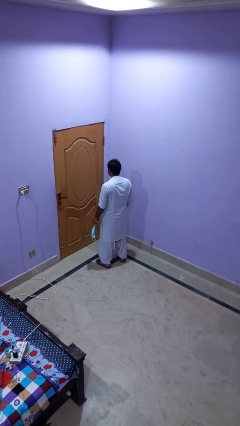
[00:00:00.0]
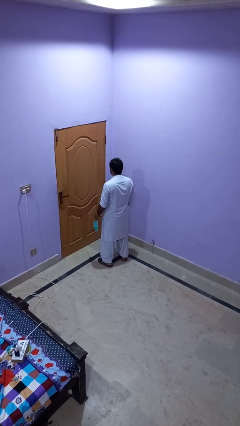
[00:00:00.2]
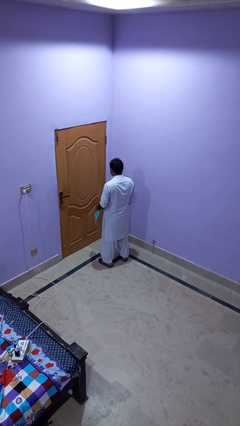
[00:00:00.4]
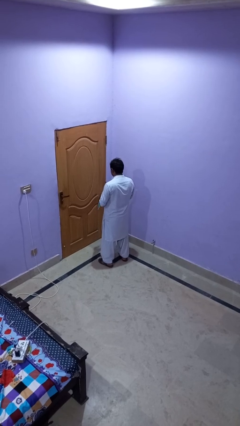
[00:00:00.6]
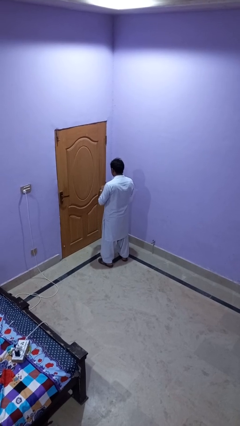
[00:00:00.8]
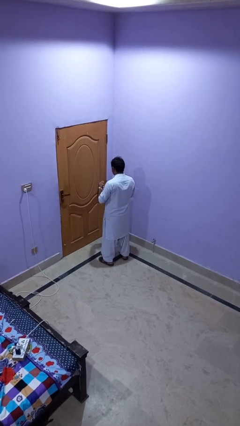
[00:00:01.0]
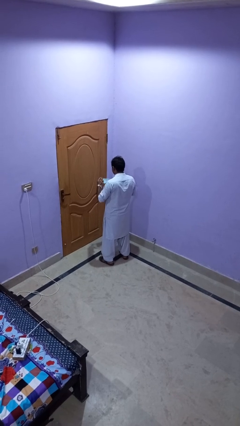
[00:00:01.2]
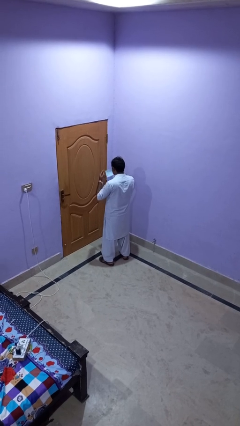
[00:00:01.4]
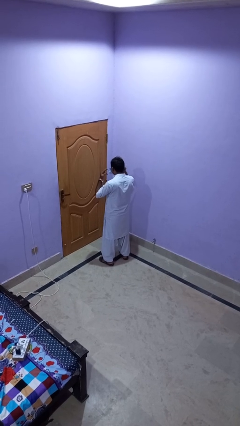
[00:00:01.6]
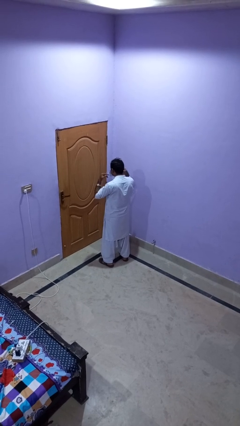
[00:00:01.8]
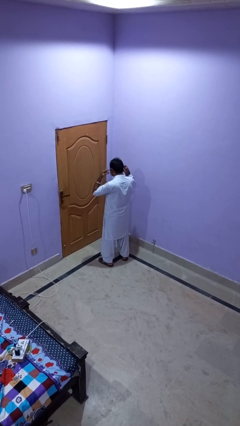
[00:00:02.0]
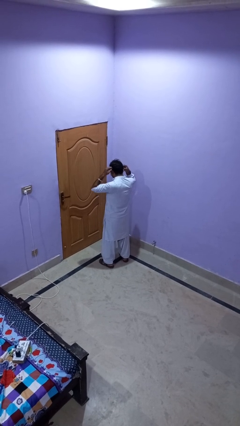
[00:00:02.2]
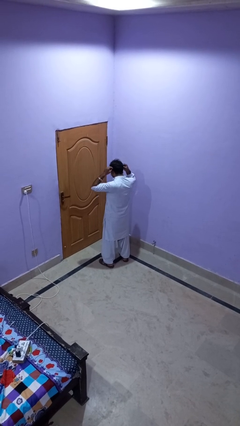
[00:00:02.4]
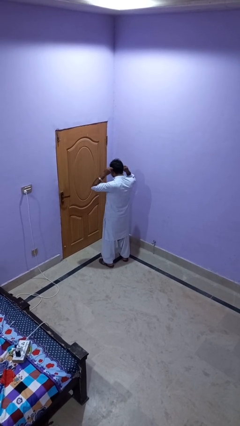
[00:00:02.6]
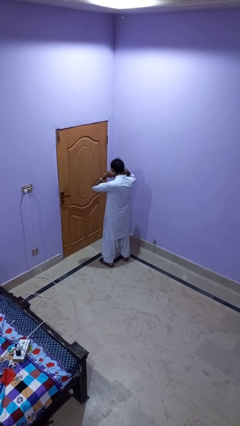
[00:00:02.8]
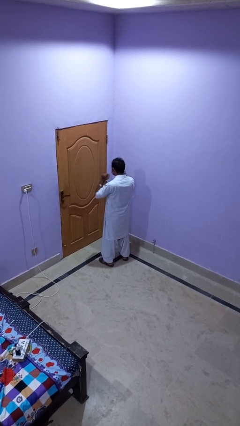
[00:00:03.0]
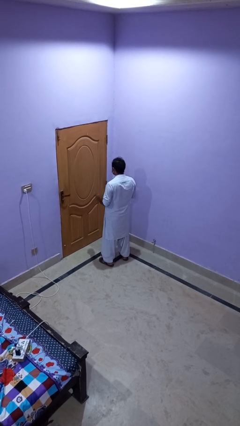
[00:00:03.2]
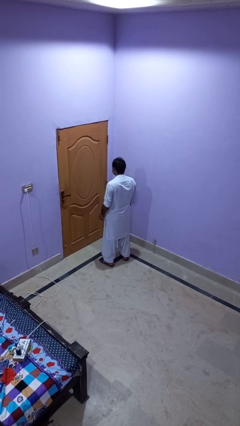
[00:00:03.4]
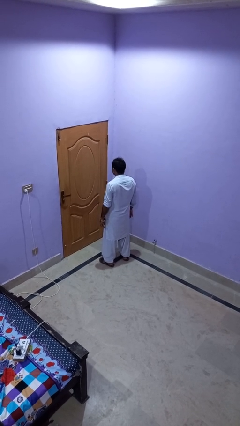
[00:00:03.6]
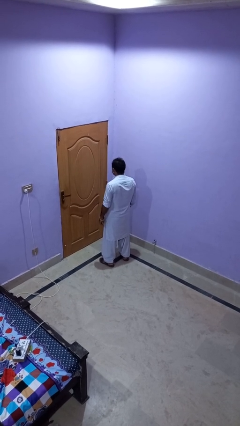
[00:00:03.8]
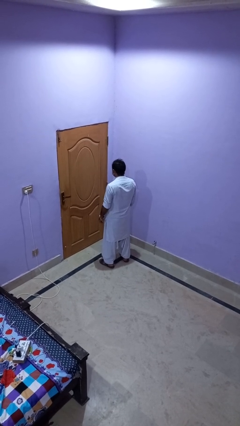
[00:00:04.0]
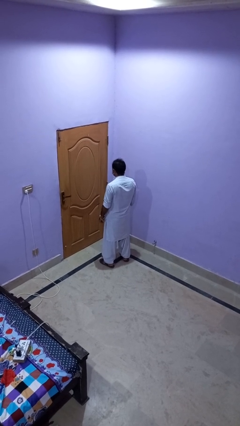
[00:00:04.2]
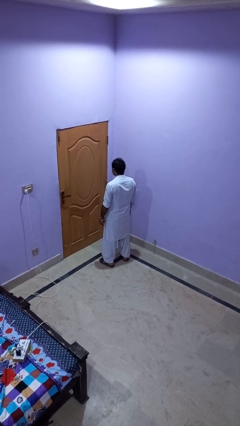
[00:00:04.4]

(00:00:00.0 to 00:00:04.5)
person puts on facemask

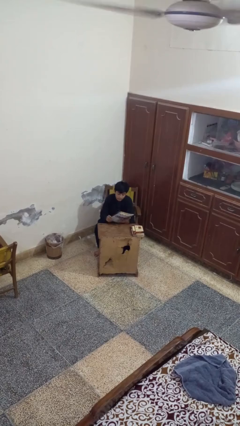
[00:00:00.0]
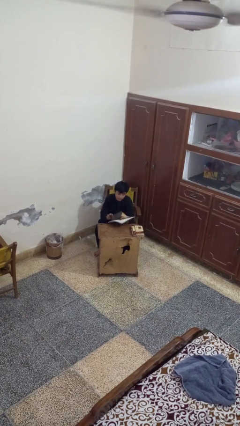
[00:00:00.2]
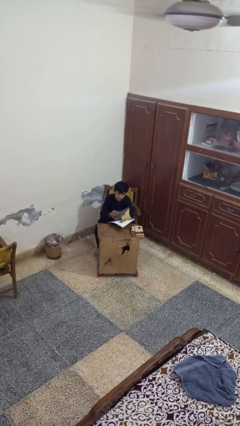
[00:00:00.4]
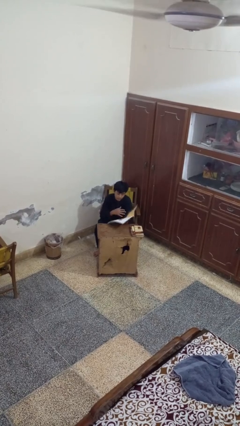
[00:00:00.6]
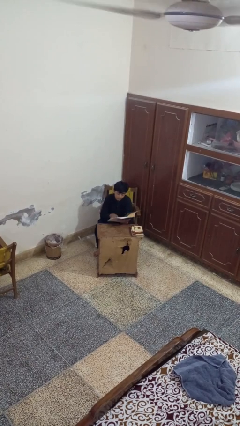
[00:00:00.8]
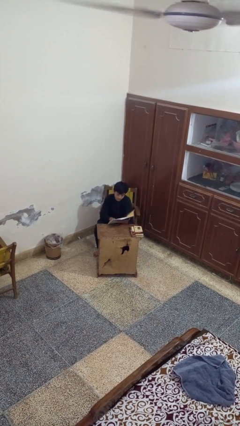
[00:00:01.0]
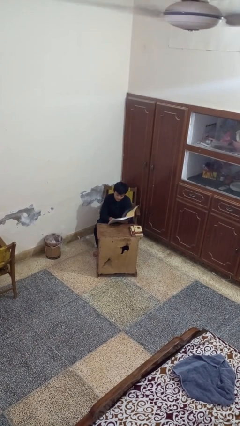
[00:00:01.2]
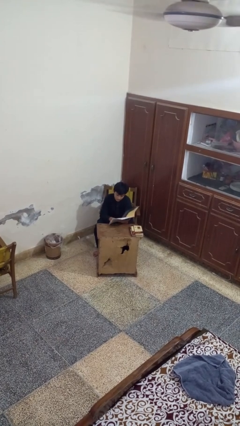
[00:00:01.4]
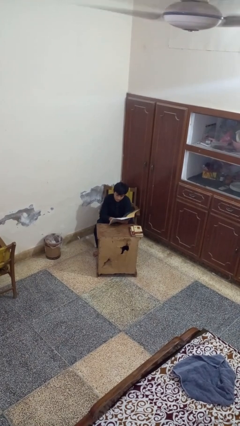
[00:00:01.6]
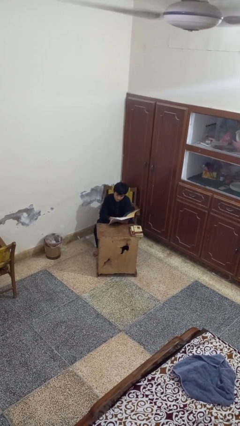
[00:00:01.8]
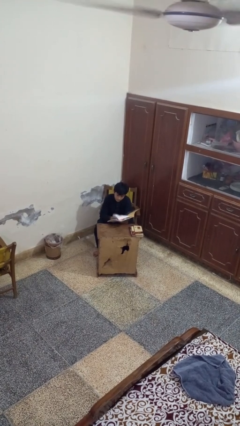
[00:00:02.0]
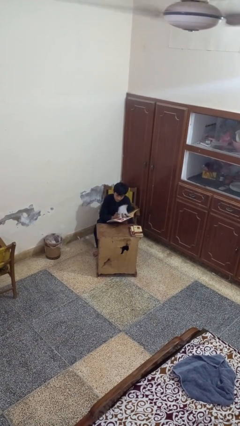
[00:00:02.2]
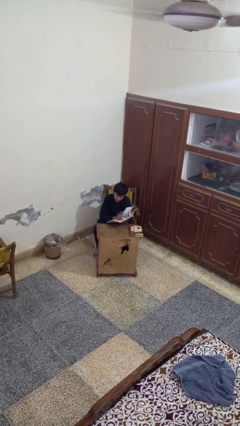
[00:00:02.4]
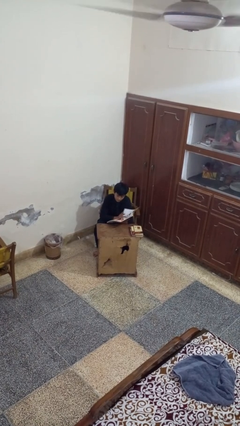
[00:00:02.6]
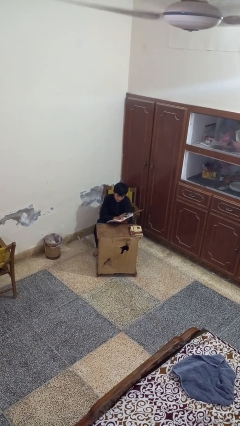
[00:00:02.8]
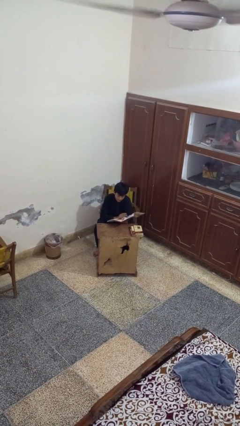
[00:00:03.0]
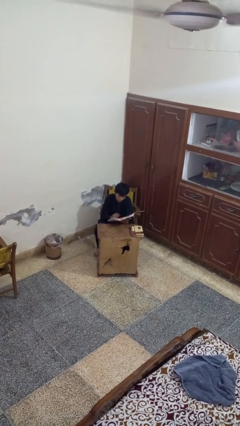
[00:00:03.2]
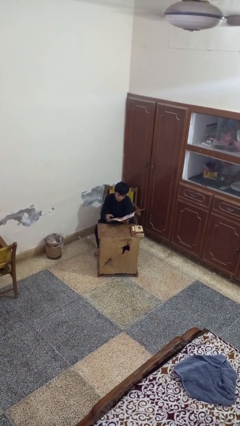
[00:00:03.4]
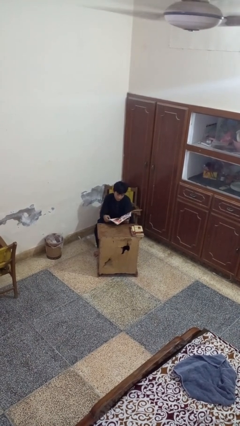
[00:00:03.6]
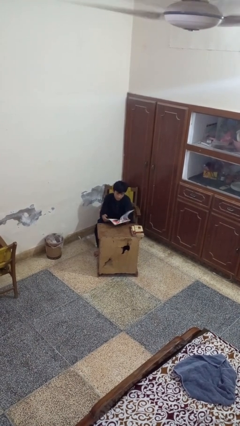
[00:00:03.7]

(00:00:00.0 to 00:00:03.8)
person reads magazine

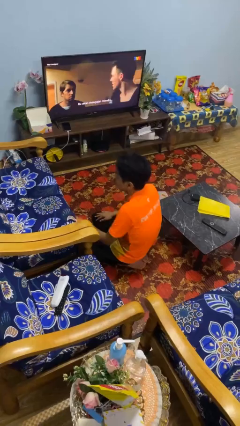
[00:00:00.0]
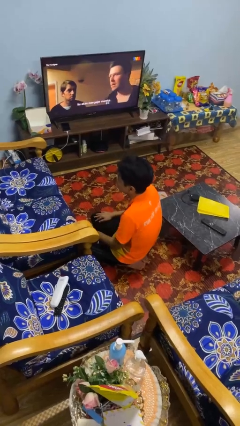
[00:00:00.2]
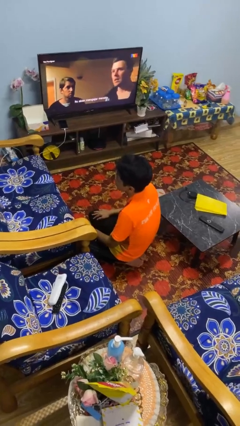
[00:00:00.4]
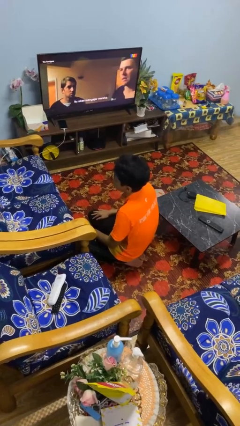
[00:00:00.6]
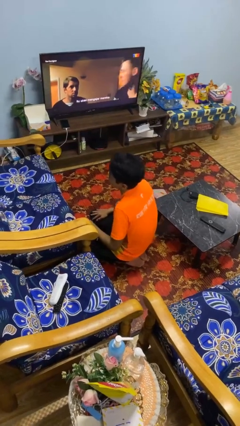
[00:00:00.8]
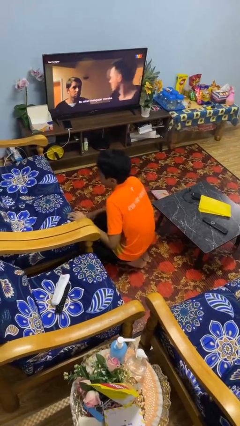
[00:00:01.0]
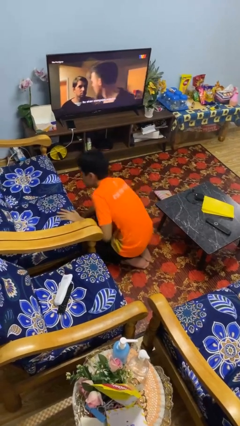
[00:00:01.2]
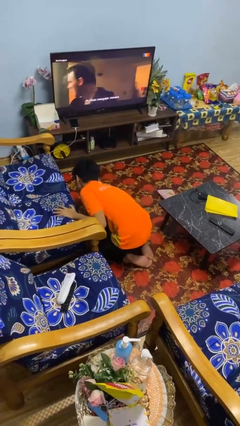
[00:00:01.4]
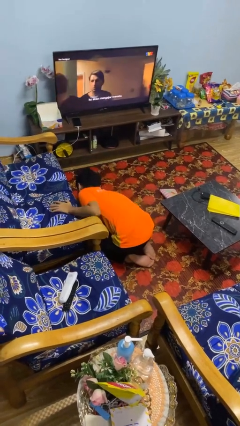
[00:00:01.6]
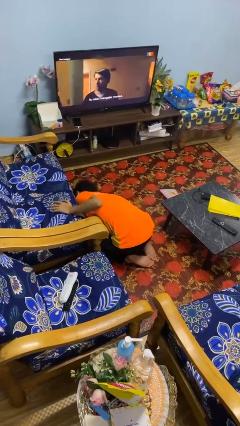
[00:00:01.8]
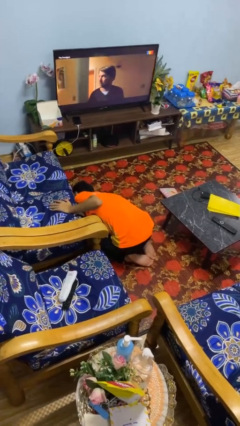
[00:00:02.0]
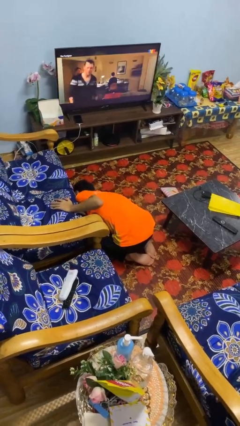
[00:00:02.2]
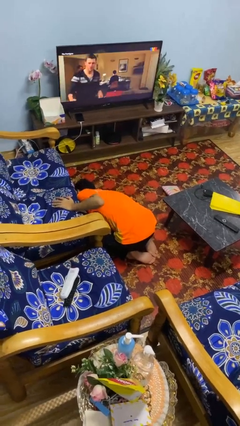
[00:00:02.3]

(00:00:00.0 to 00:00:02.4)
person searches under couch

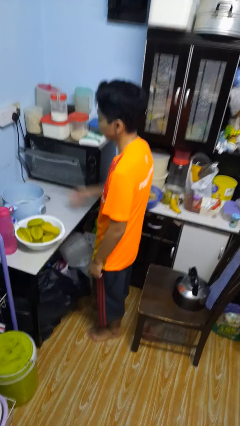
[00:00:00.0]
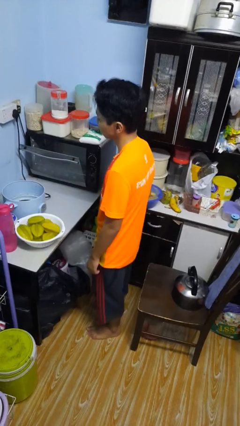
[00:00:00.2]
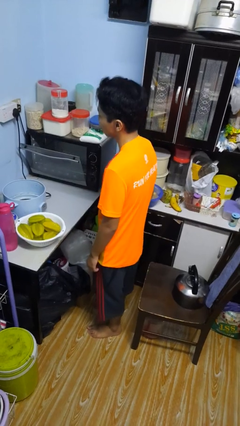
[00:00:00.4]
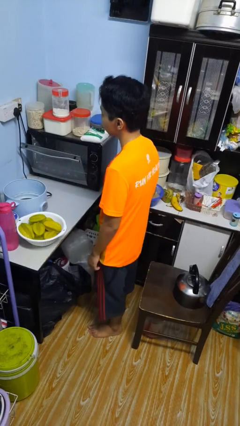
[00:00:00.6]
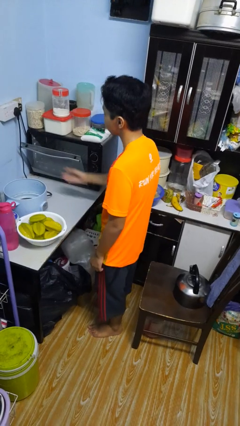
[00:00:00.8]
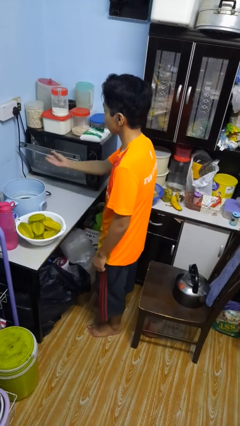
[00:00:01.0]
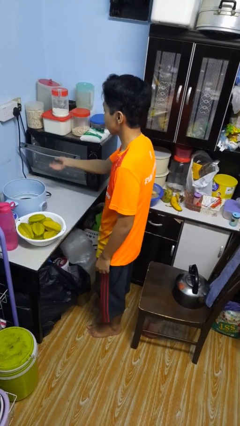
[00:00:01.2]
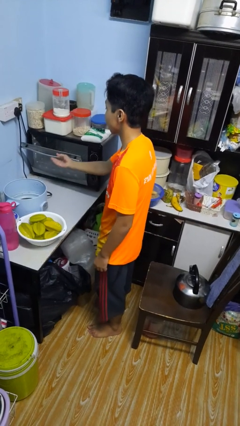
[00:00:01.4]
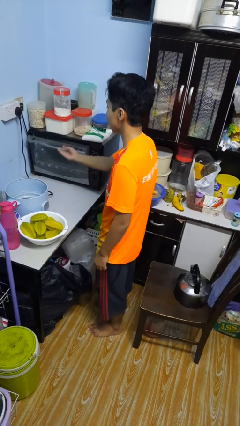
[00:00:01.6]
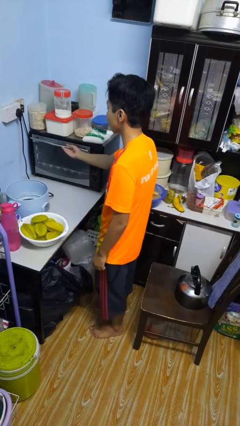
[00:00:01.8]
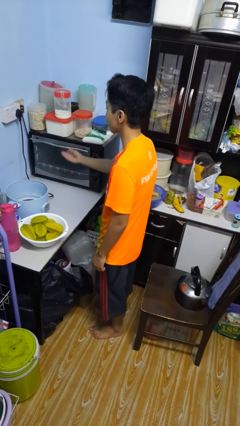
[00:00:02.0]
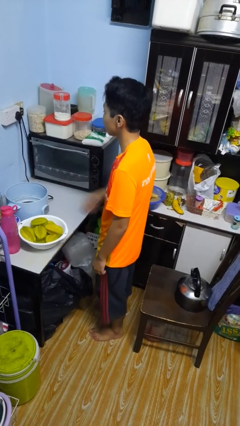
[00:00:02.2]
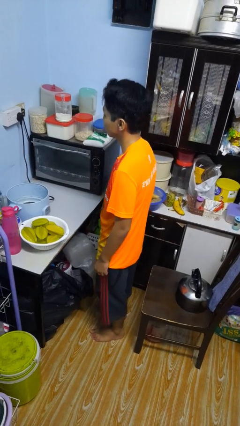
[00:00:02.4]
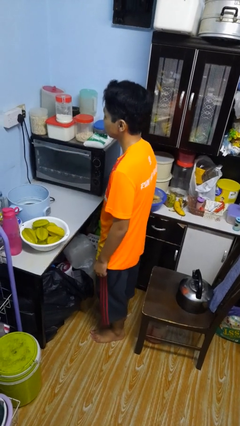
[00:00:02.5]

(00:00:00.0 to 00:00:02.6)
person closes microwave

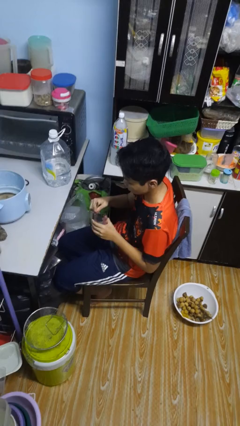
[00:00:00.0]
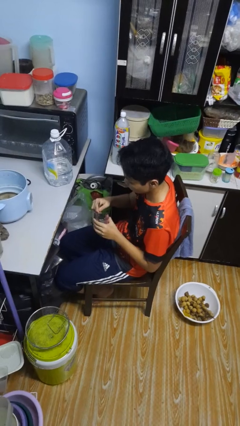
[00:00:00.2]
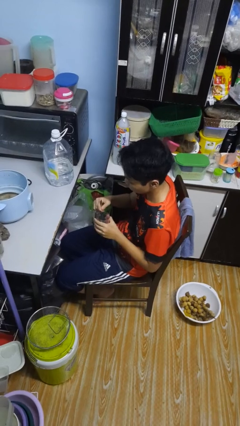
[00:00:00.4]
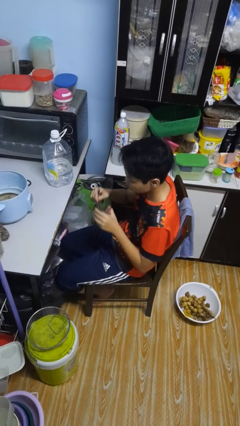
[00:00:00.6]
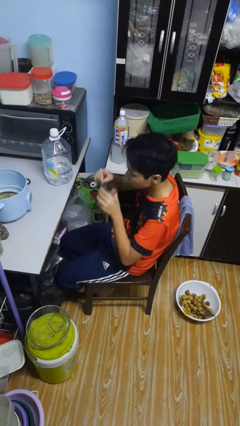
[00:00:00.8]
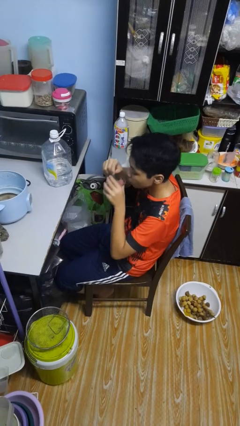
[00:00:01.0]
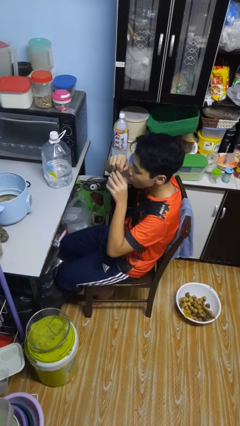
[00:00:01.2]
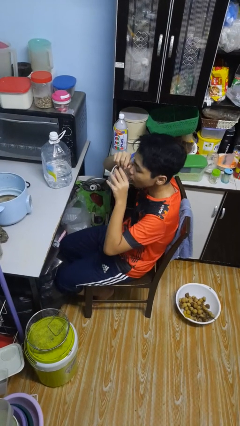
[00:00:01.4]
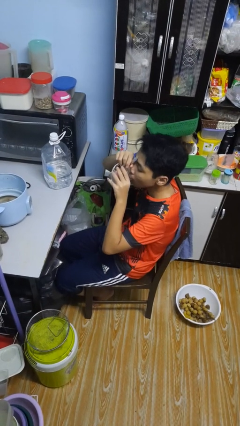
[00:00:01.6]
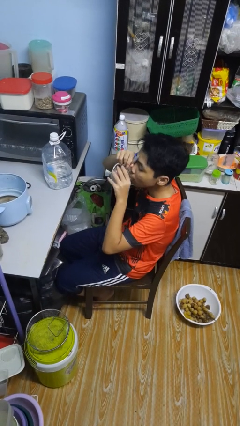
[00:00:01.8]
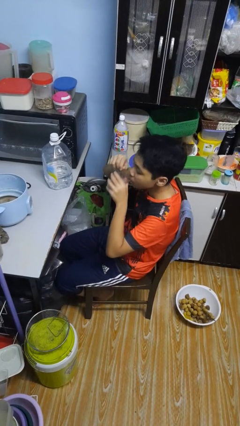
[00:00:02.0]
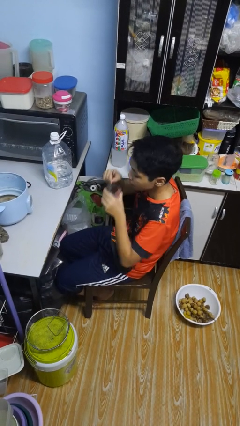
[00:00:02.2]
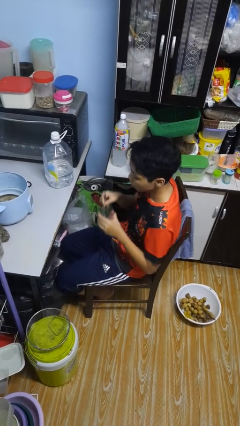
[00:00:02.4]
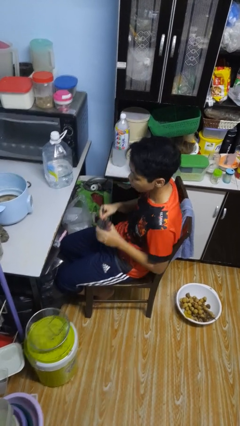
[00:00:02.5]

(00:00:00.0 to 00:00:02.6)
person drinks from mug

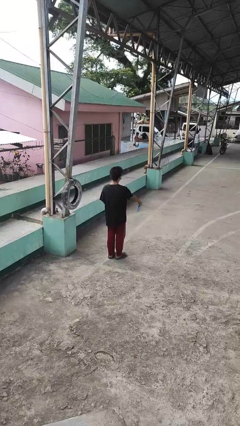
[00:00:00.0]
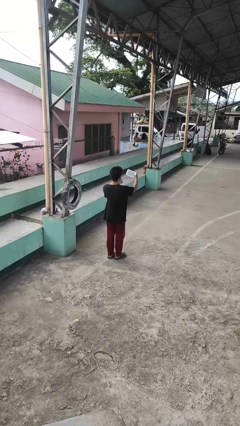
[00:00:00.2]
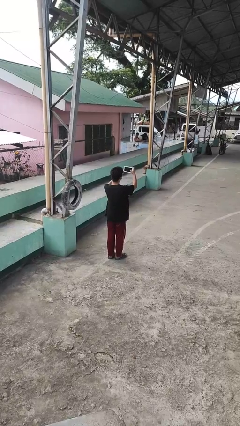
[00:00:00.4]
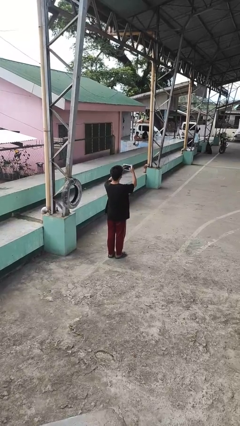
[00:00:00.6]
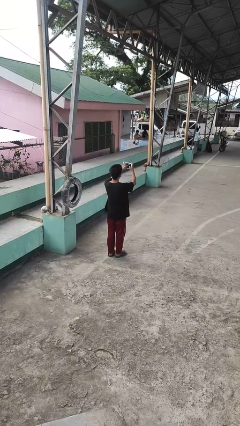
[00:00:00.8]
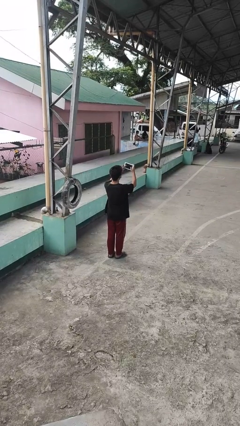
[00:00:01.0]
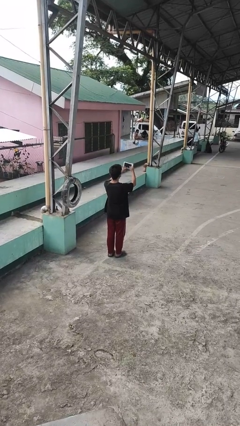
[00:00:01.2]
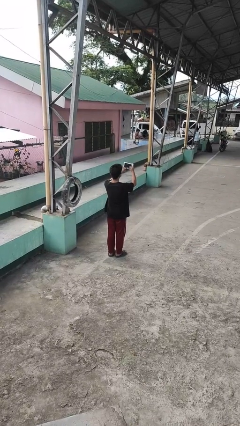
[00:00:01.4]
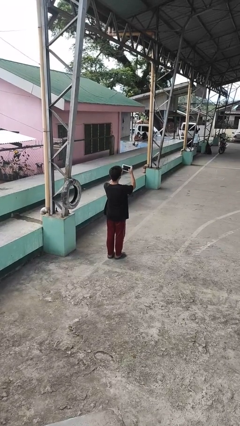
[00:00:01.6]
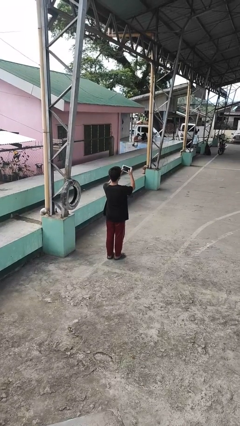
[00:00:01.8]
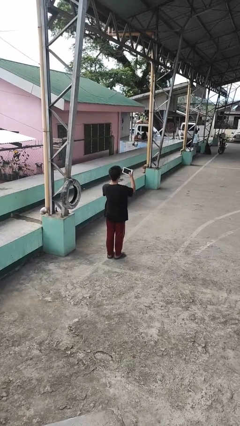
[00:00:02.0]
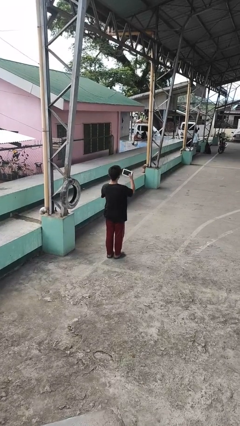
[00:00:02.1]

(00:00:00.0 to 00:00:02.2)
person interacts with tablet
